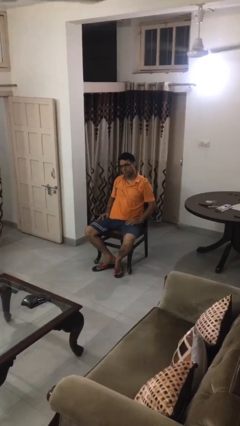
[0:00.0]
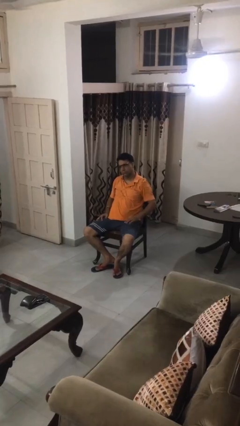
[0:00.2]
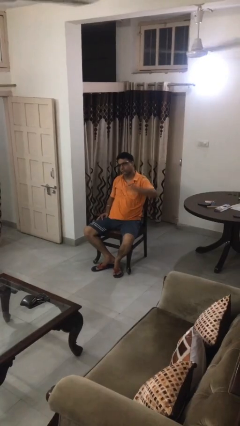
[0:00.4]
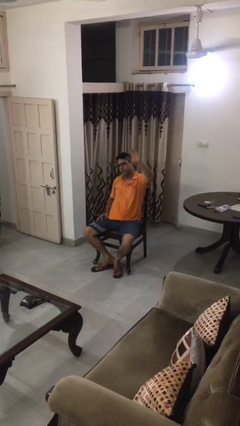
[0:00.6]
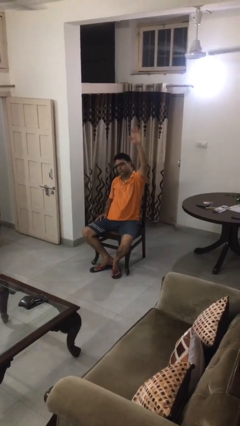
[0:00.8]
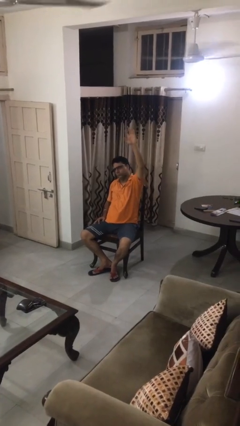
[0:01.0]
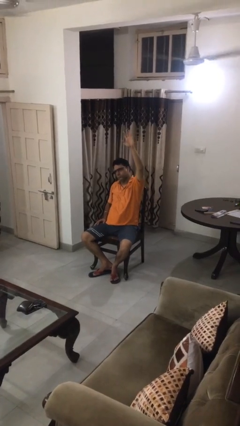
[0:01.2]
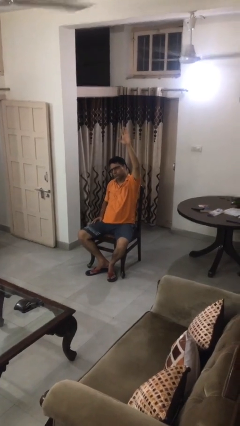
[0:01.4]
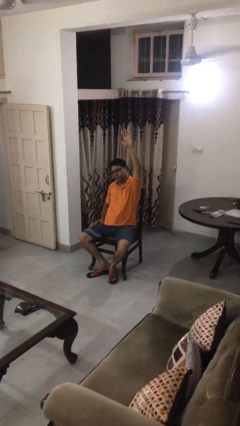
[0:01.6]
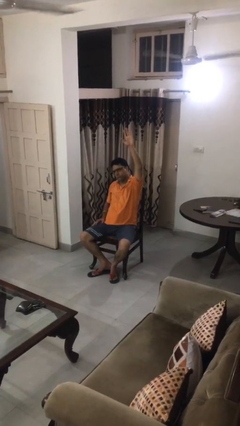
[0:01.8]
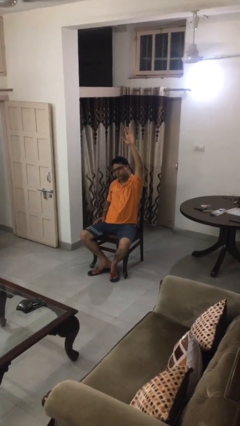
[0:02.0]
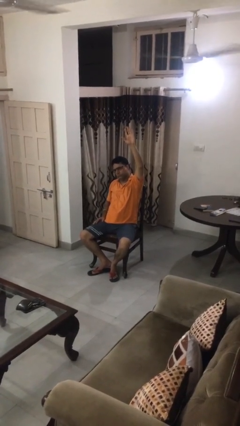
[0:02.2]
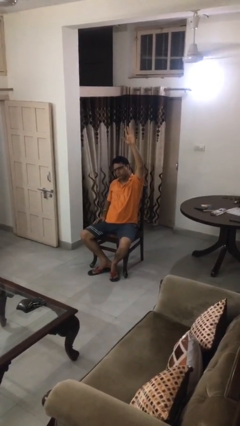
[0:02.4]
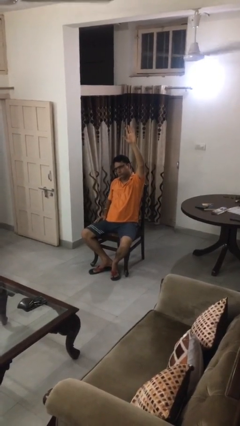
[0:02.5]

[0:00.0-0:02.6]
person gestures raise hand

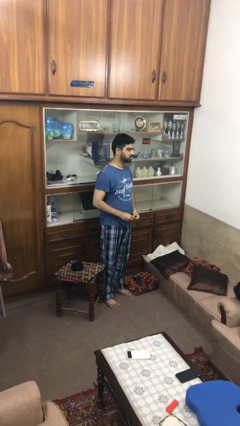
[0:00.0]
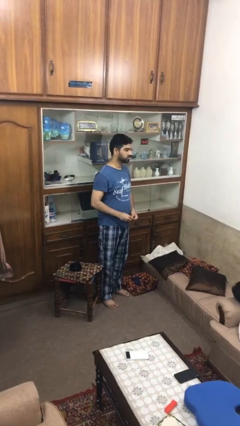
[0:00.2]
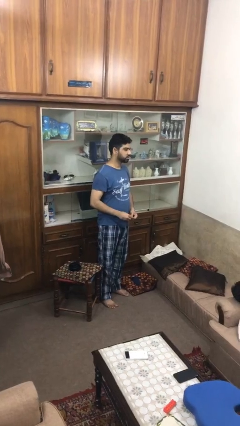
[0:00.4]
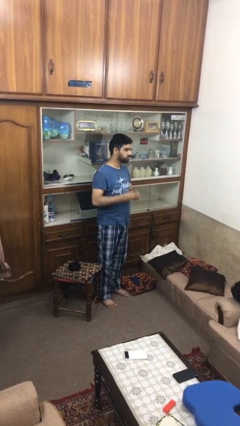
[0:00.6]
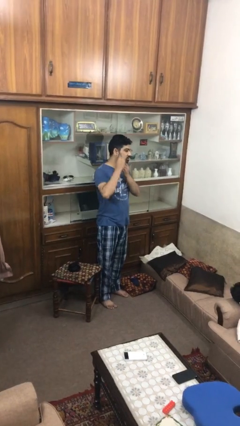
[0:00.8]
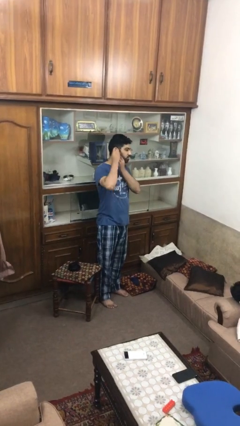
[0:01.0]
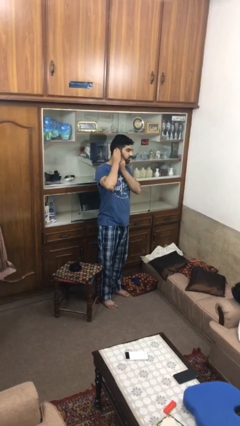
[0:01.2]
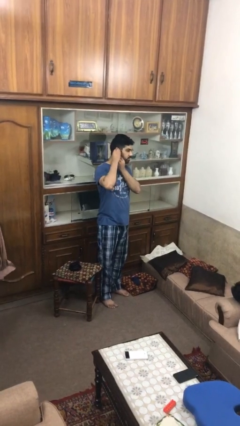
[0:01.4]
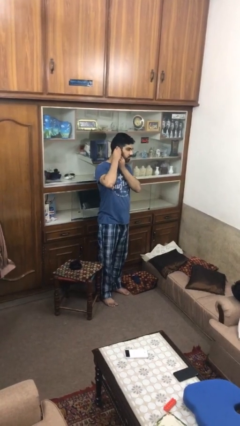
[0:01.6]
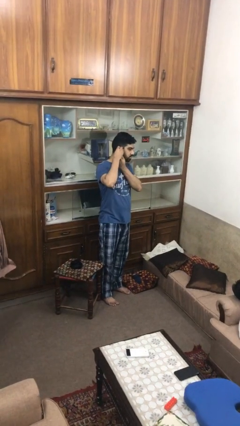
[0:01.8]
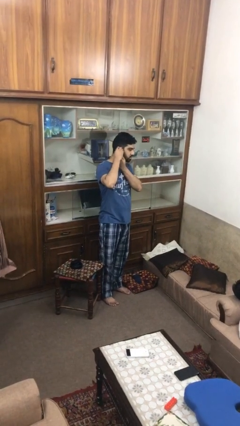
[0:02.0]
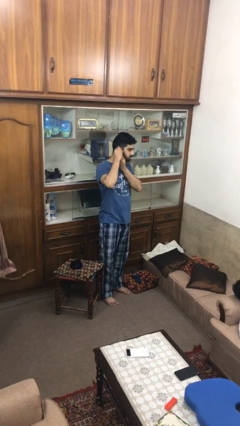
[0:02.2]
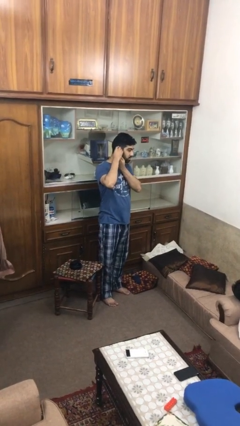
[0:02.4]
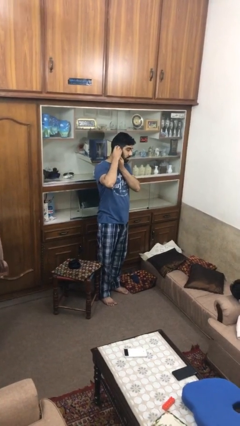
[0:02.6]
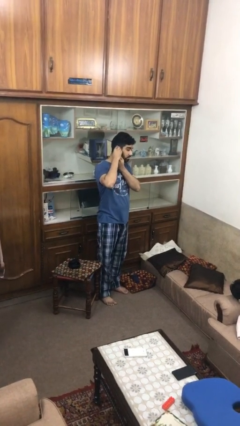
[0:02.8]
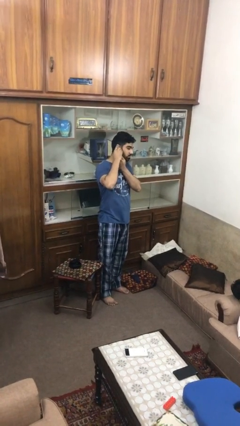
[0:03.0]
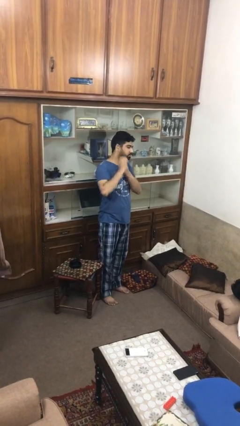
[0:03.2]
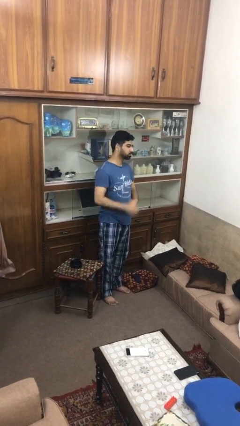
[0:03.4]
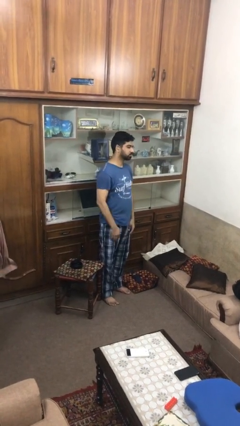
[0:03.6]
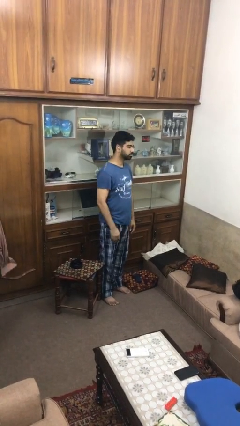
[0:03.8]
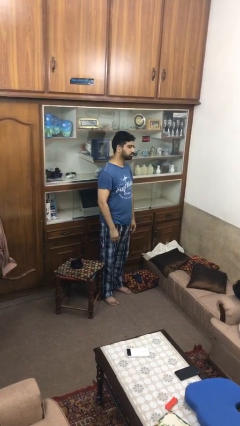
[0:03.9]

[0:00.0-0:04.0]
person puts on earrings

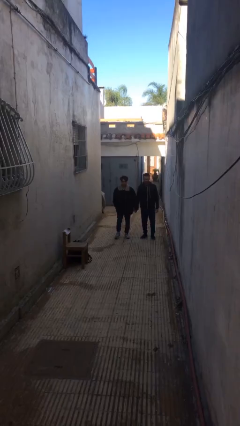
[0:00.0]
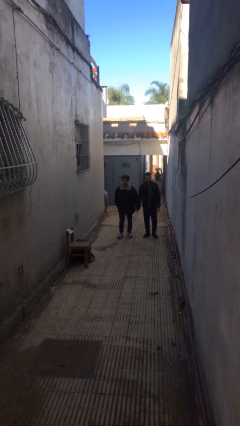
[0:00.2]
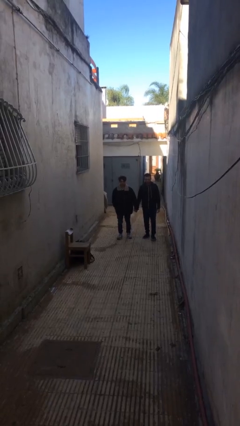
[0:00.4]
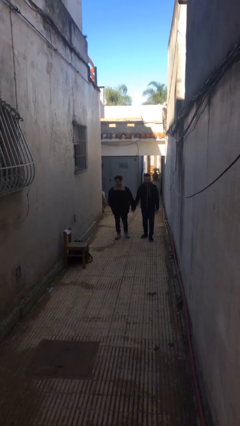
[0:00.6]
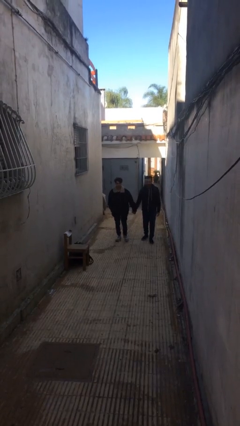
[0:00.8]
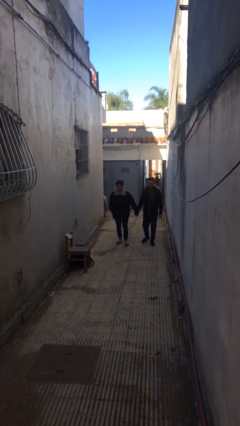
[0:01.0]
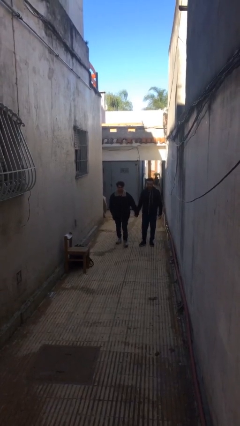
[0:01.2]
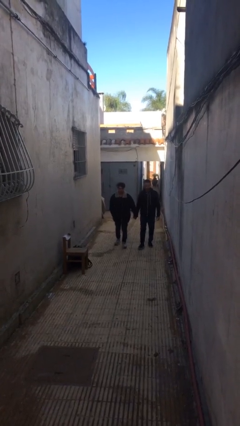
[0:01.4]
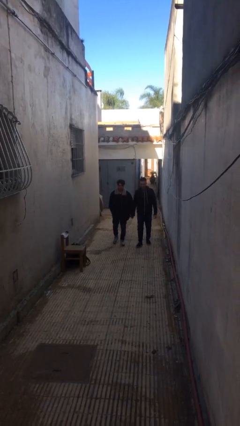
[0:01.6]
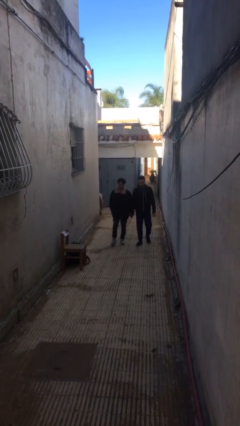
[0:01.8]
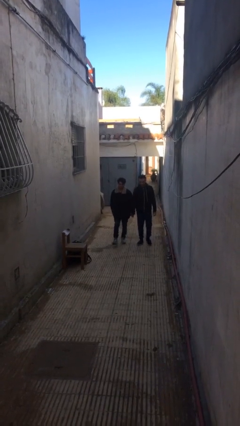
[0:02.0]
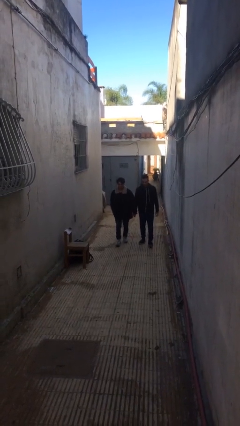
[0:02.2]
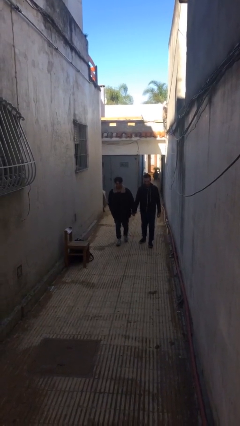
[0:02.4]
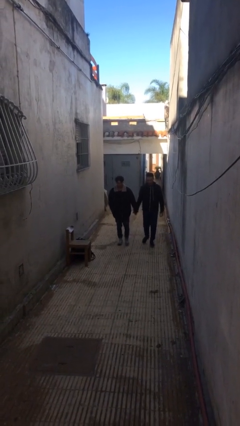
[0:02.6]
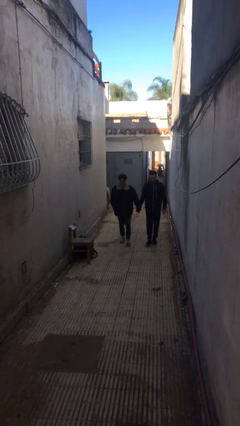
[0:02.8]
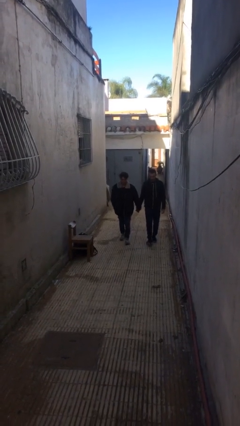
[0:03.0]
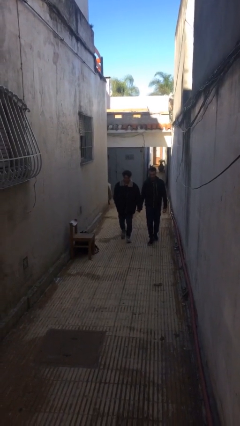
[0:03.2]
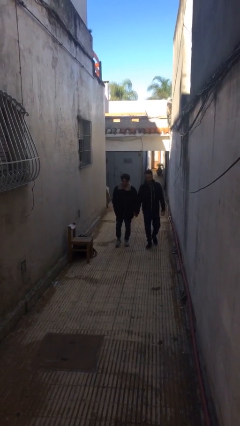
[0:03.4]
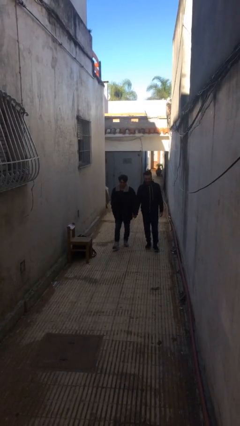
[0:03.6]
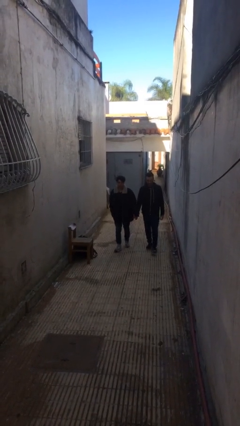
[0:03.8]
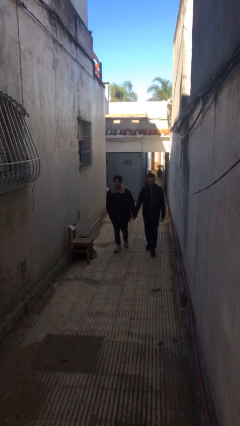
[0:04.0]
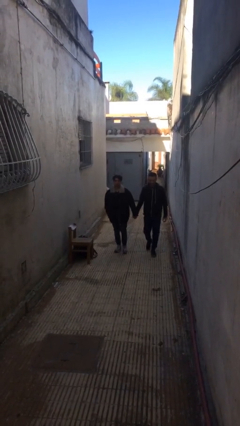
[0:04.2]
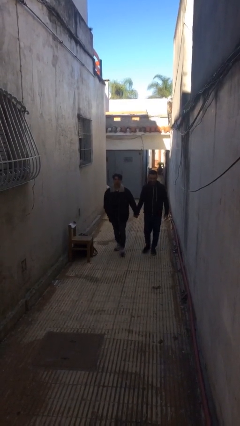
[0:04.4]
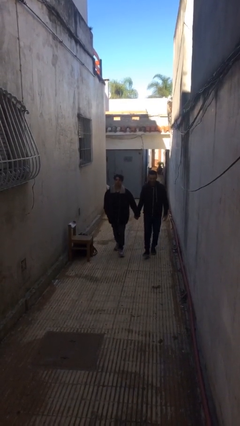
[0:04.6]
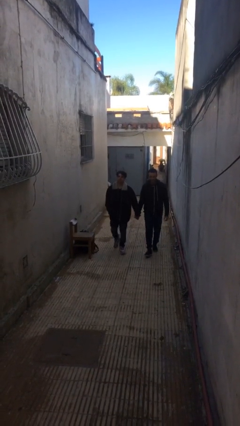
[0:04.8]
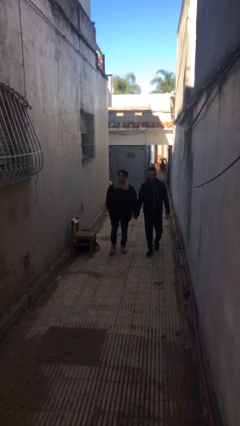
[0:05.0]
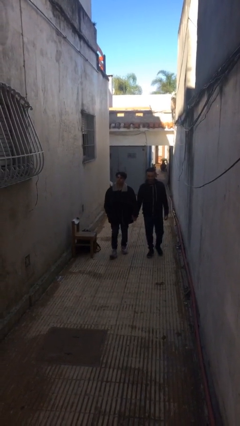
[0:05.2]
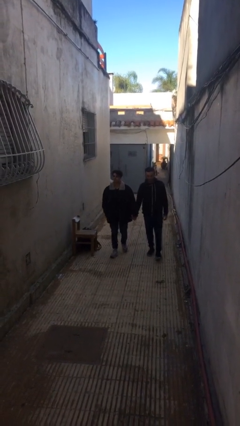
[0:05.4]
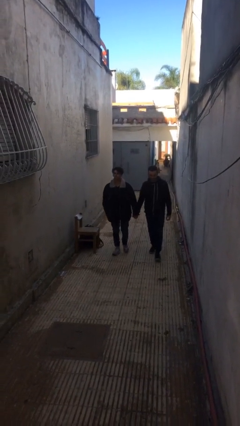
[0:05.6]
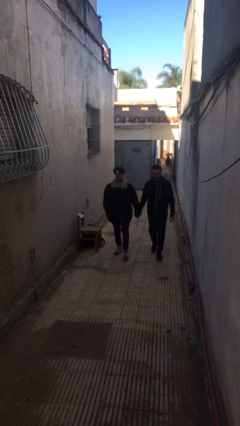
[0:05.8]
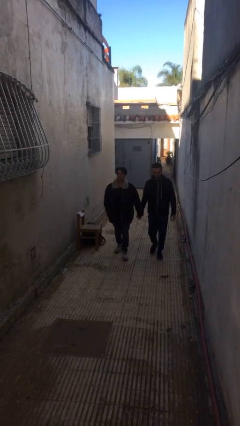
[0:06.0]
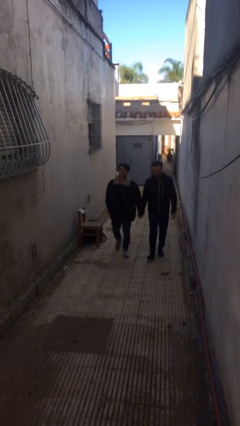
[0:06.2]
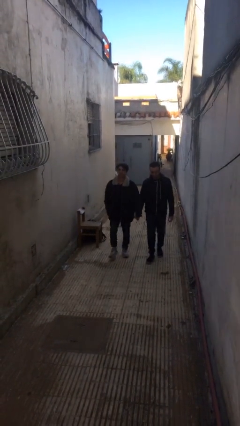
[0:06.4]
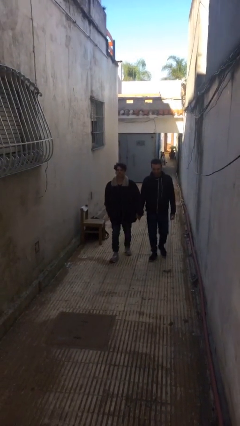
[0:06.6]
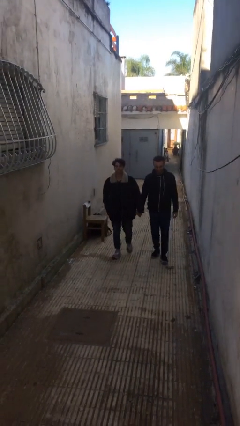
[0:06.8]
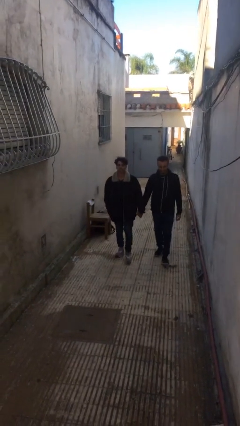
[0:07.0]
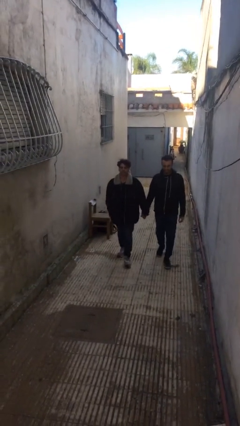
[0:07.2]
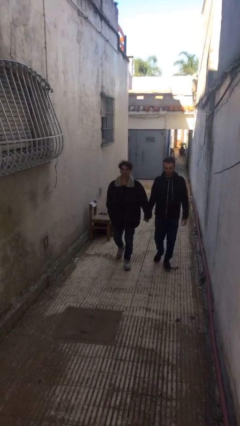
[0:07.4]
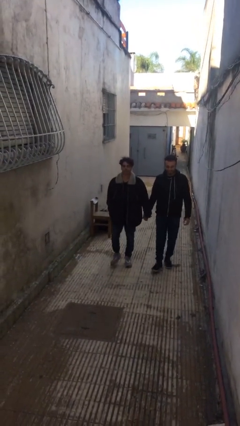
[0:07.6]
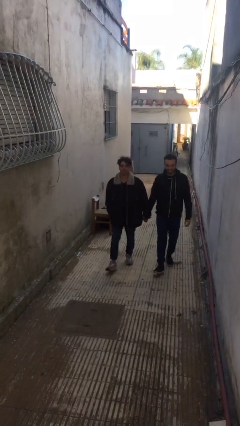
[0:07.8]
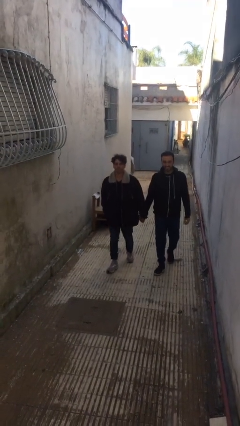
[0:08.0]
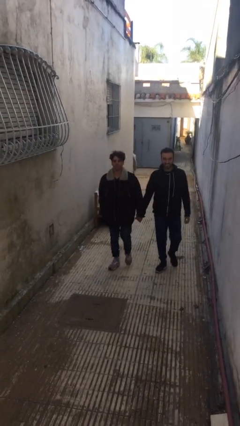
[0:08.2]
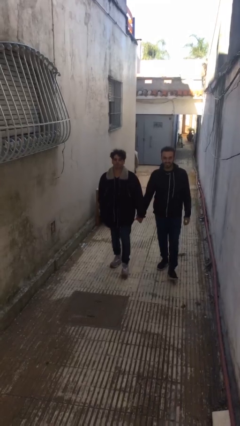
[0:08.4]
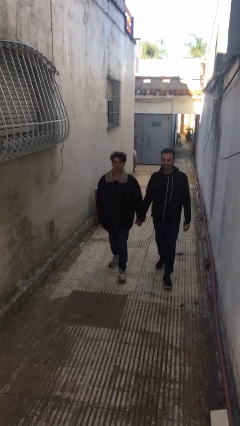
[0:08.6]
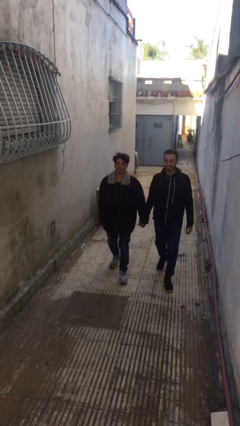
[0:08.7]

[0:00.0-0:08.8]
person holds hand

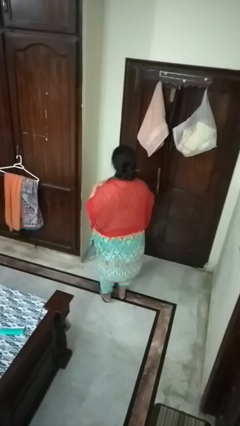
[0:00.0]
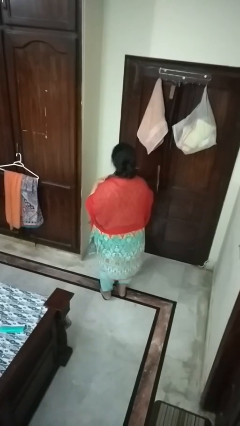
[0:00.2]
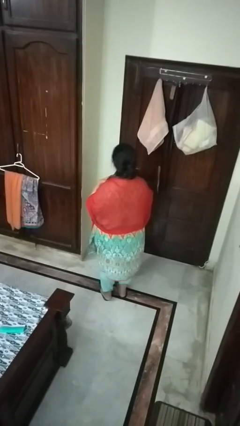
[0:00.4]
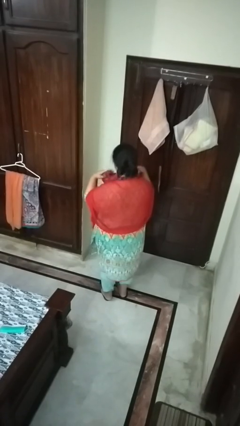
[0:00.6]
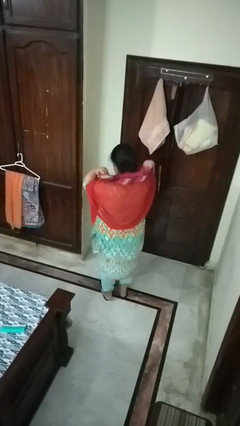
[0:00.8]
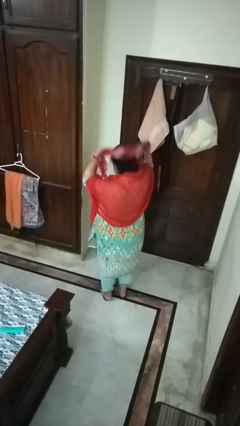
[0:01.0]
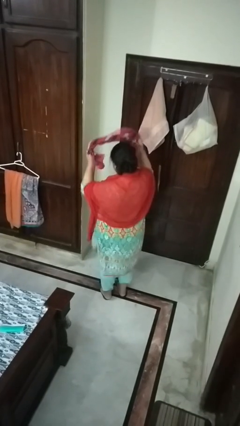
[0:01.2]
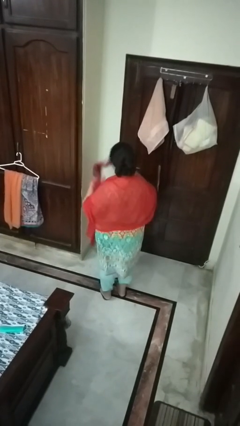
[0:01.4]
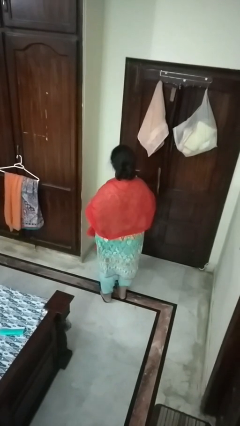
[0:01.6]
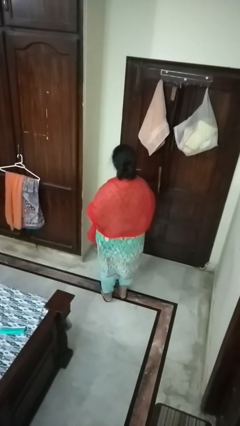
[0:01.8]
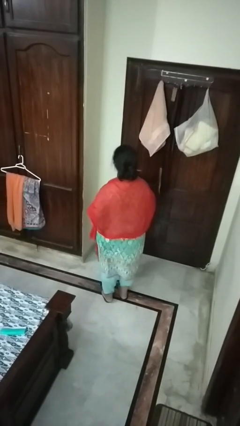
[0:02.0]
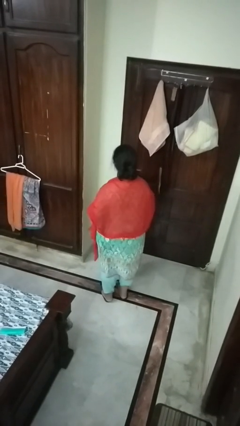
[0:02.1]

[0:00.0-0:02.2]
person takes off scarf
